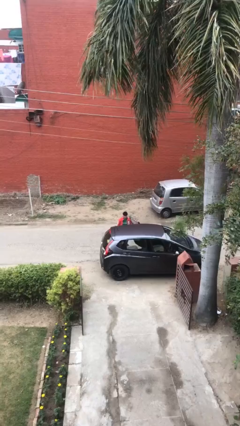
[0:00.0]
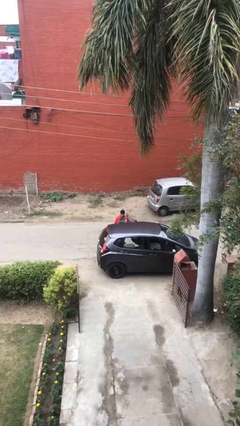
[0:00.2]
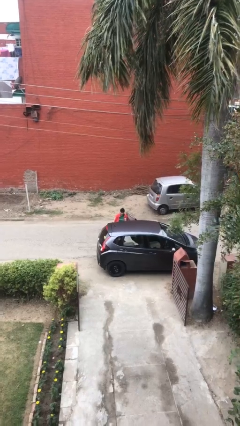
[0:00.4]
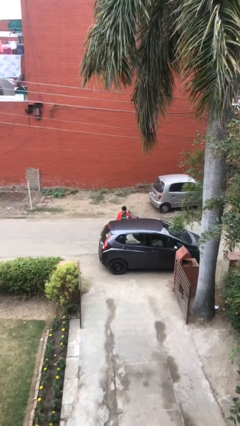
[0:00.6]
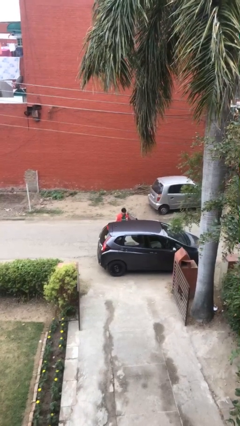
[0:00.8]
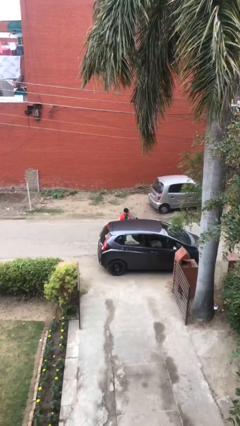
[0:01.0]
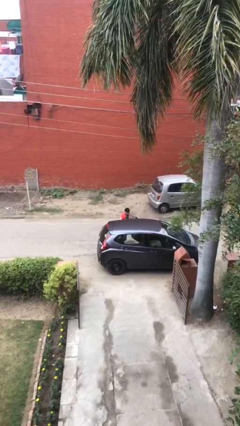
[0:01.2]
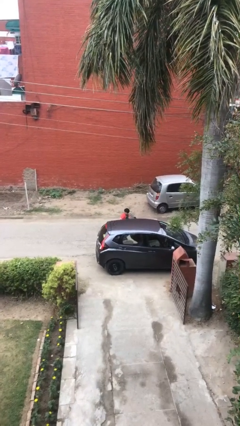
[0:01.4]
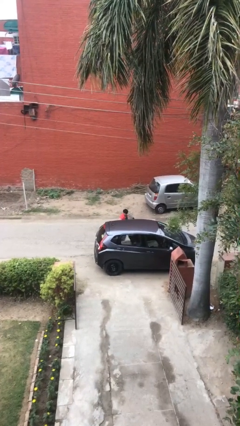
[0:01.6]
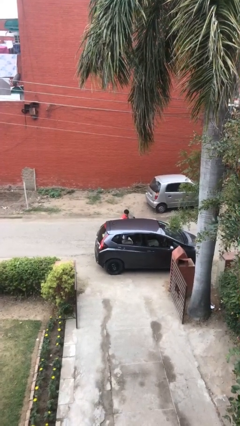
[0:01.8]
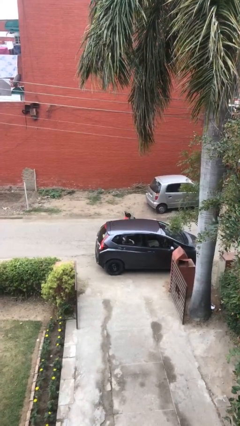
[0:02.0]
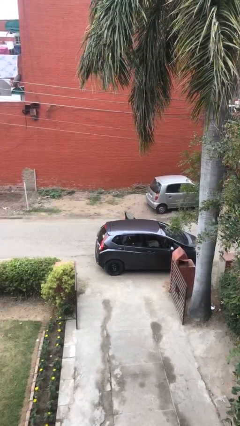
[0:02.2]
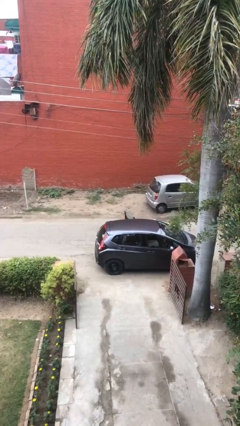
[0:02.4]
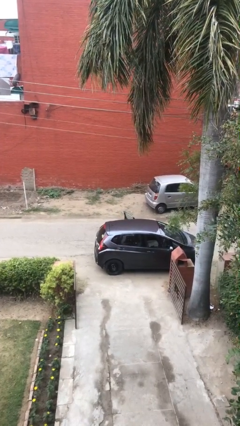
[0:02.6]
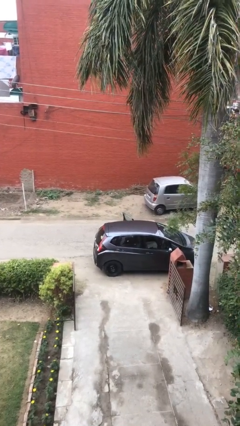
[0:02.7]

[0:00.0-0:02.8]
person enters car

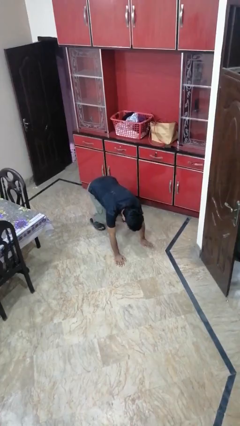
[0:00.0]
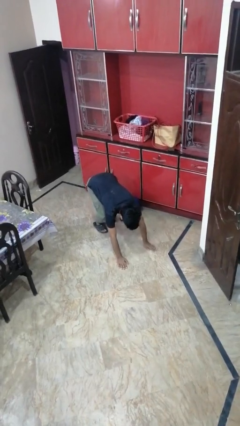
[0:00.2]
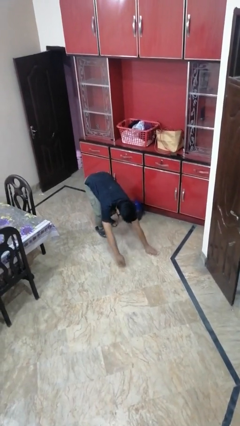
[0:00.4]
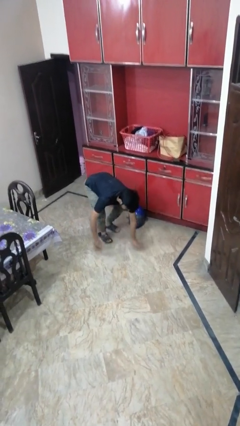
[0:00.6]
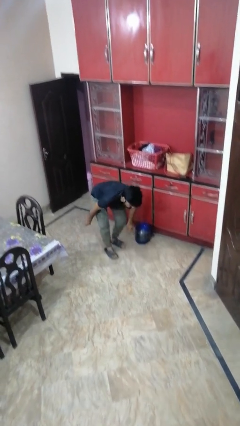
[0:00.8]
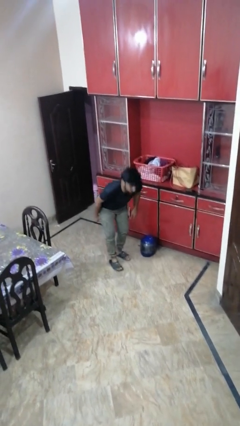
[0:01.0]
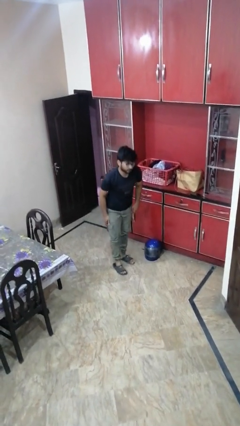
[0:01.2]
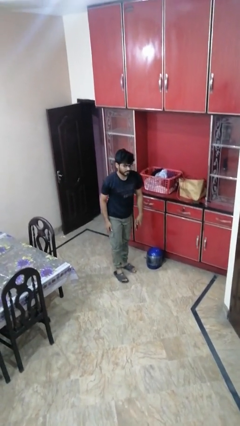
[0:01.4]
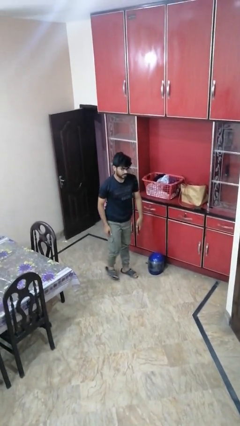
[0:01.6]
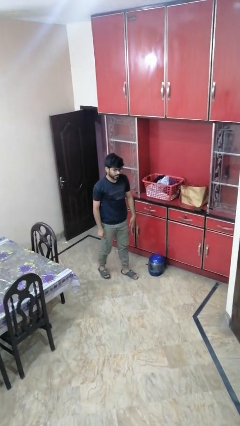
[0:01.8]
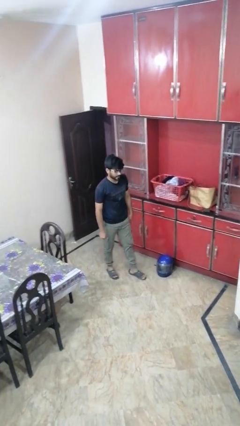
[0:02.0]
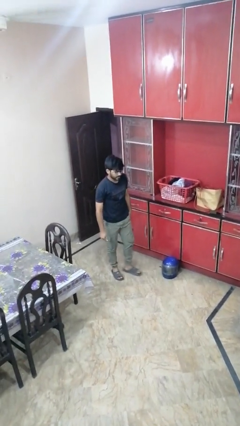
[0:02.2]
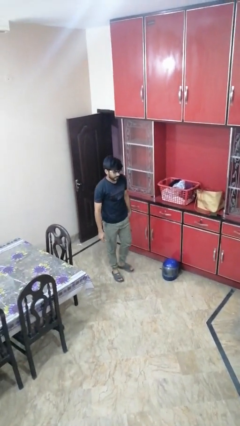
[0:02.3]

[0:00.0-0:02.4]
person stands up from floor

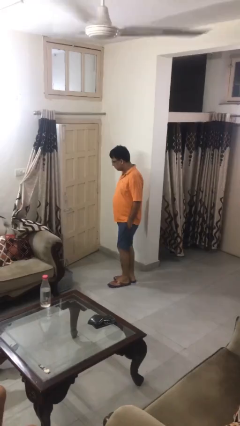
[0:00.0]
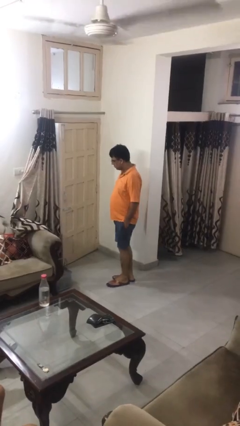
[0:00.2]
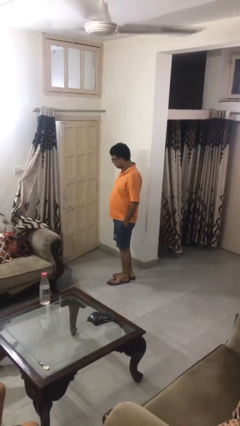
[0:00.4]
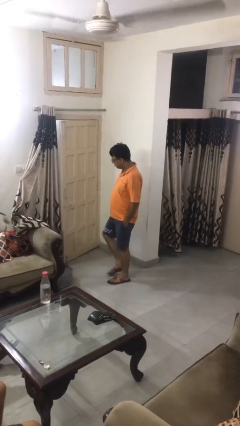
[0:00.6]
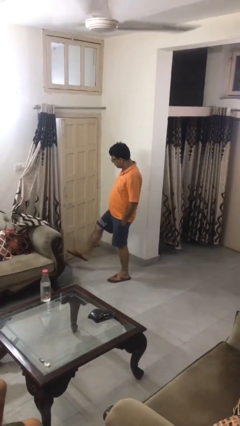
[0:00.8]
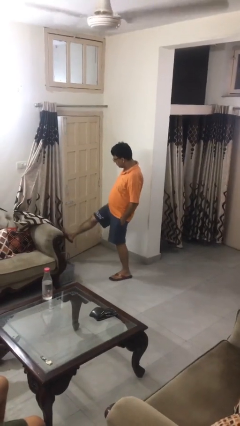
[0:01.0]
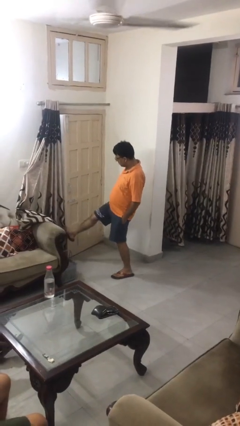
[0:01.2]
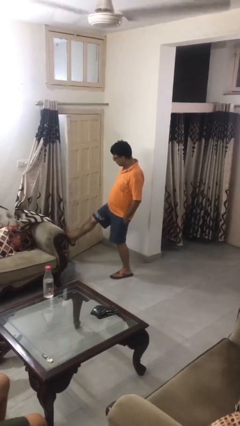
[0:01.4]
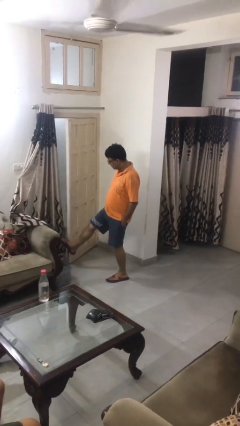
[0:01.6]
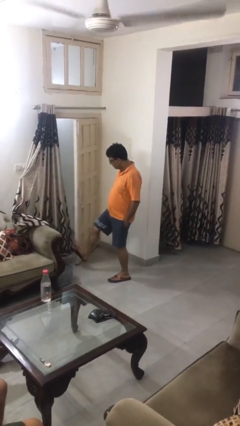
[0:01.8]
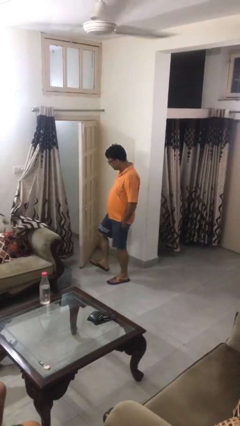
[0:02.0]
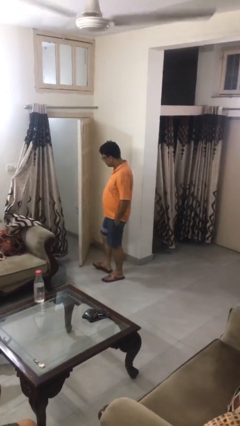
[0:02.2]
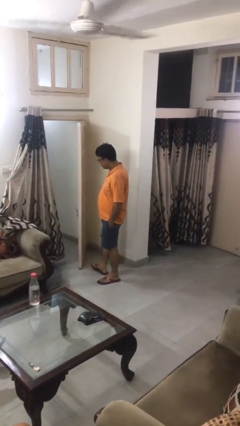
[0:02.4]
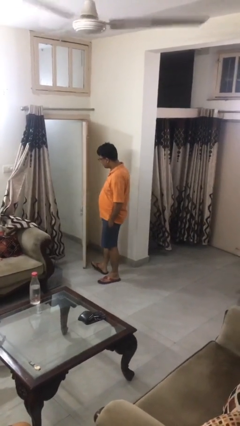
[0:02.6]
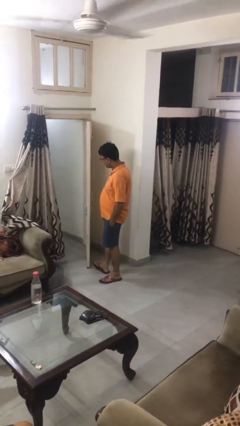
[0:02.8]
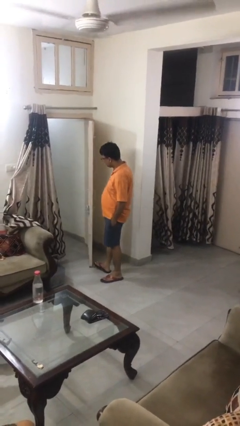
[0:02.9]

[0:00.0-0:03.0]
person opens facility door

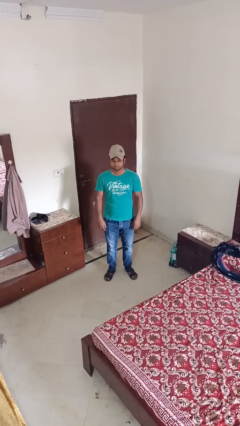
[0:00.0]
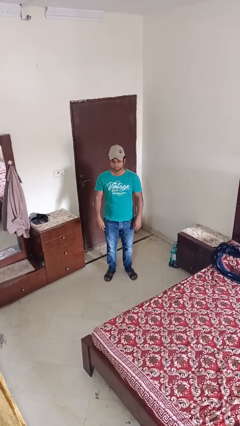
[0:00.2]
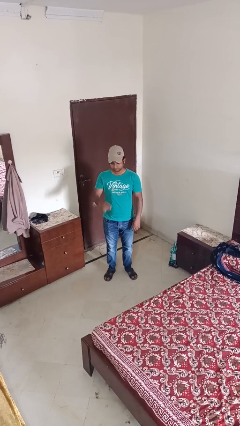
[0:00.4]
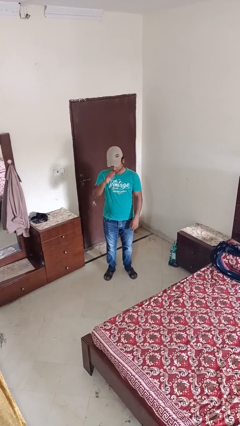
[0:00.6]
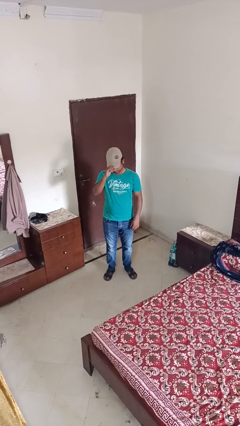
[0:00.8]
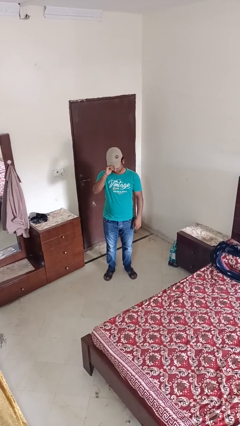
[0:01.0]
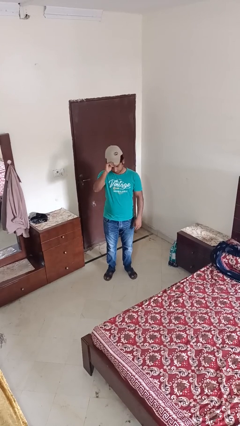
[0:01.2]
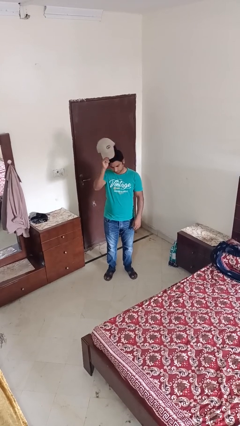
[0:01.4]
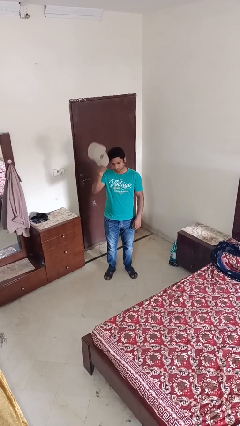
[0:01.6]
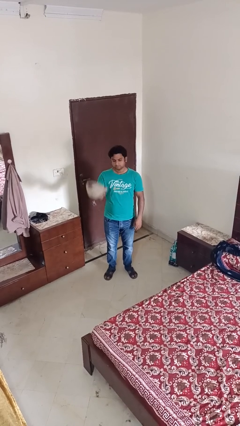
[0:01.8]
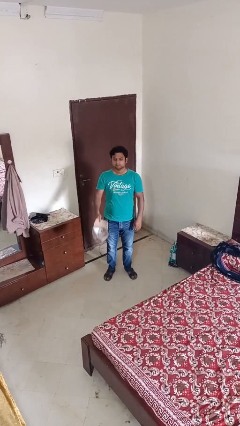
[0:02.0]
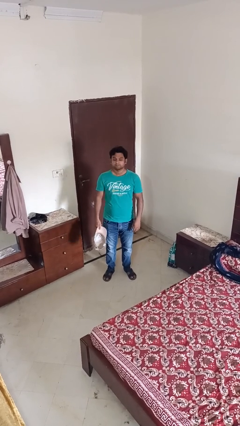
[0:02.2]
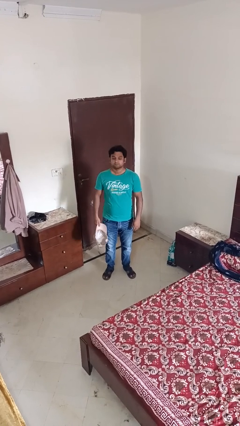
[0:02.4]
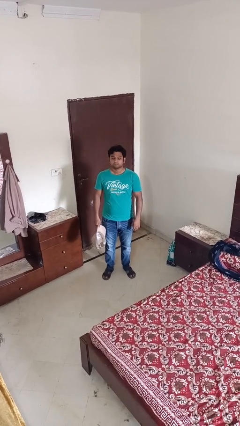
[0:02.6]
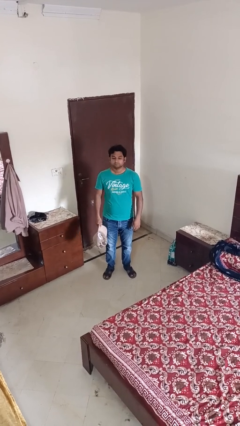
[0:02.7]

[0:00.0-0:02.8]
person takes off hat

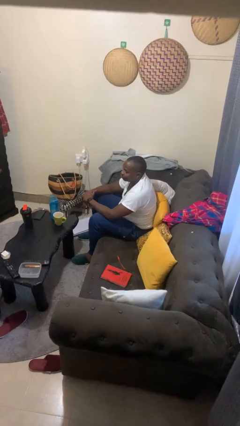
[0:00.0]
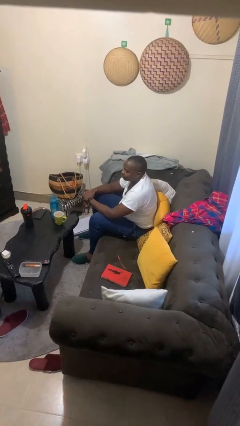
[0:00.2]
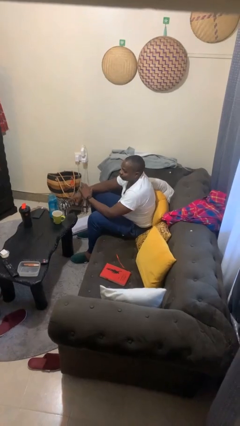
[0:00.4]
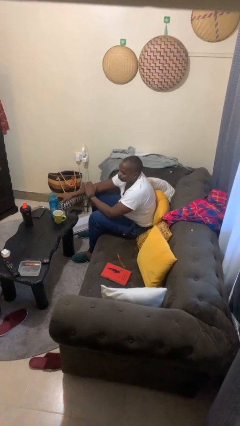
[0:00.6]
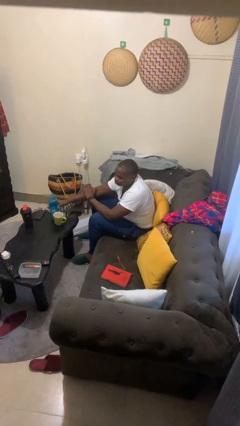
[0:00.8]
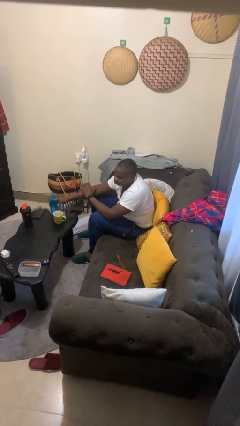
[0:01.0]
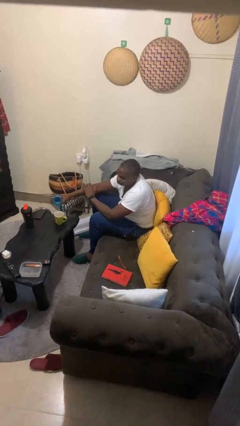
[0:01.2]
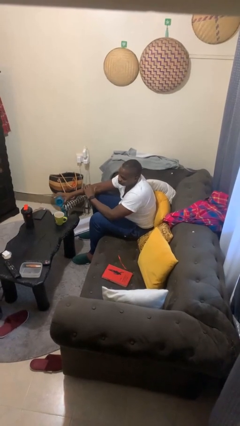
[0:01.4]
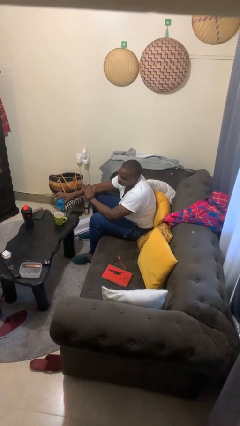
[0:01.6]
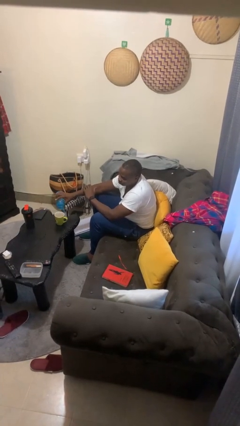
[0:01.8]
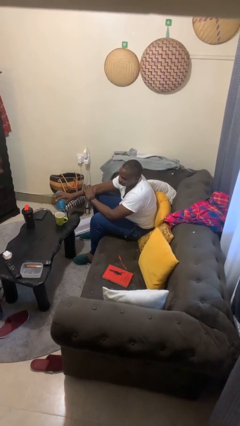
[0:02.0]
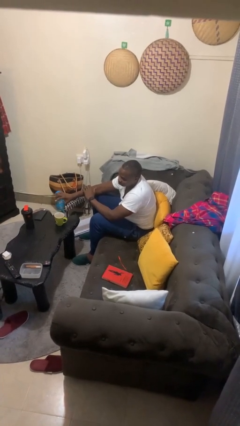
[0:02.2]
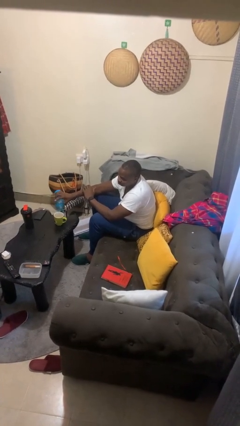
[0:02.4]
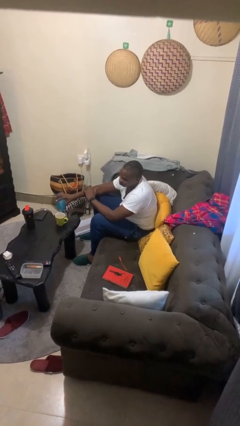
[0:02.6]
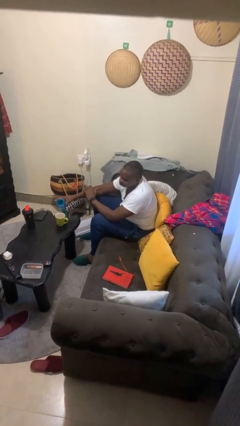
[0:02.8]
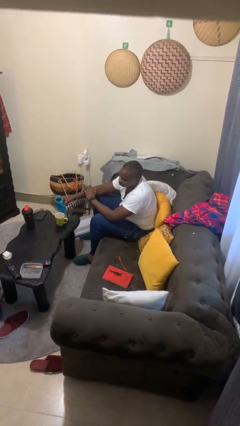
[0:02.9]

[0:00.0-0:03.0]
person pours liquid into cup

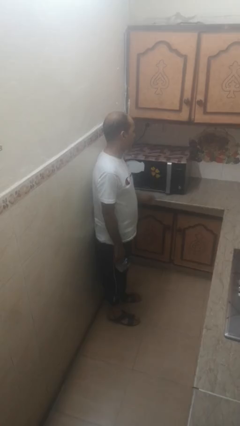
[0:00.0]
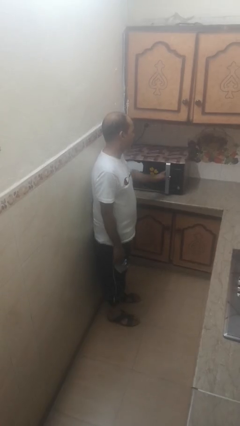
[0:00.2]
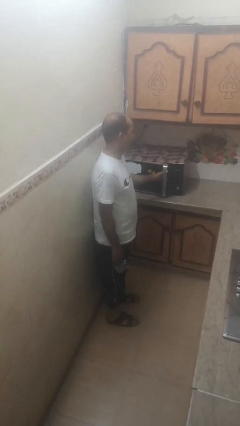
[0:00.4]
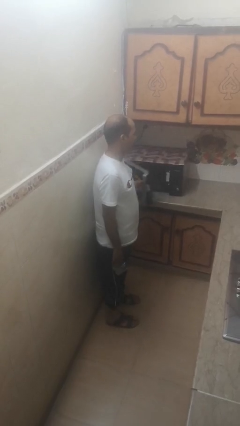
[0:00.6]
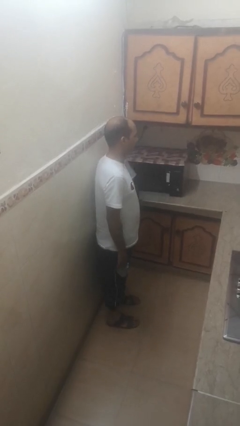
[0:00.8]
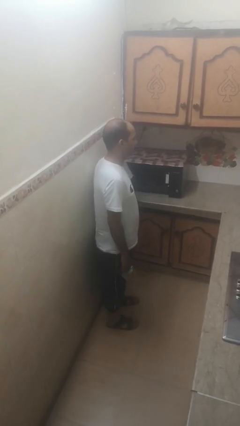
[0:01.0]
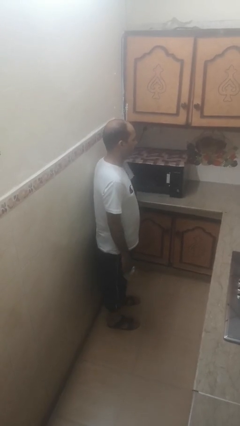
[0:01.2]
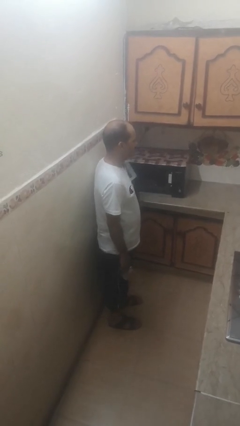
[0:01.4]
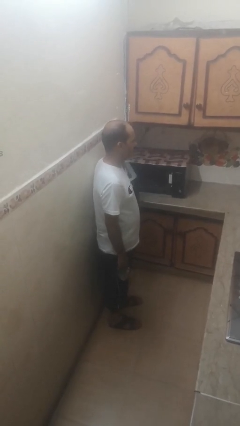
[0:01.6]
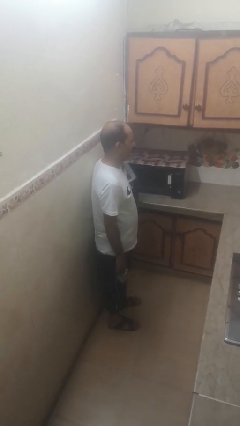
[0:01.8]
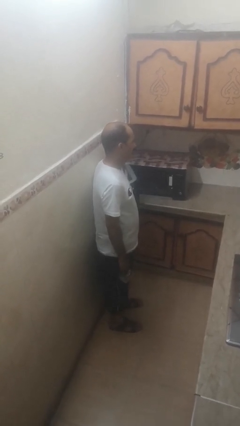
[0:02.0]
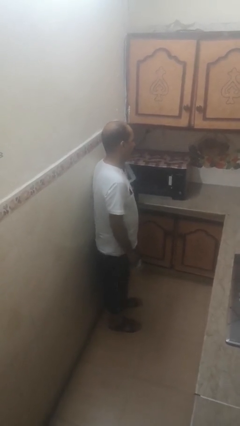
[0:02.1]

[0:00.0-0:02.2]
person opens microwave

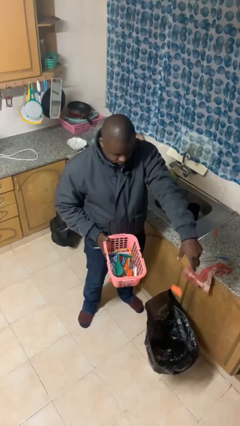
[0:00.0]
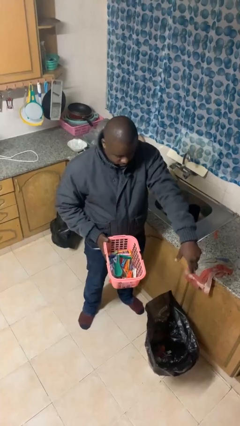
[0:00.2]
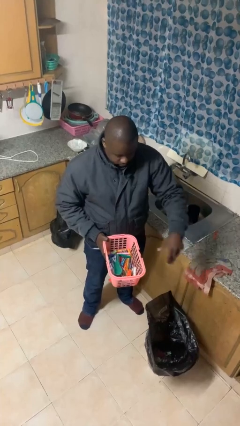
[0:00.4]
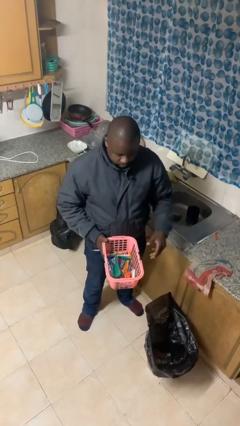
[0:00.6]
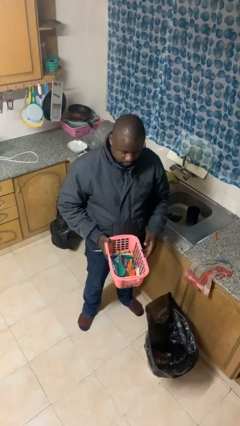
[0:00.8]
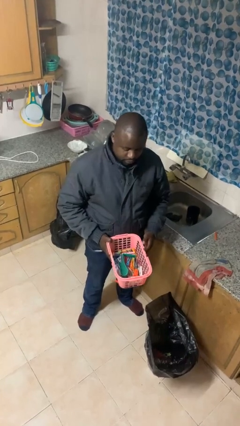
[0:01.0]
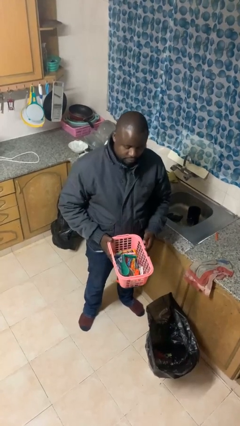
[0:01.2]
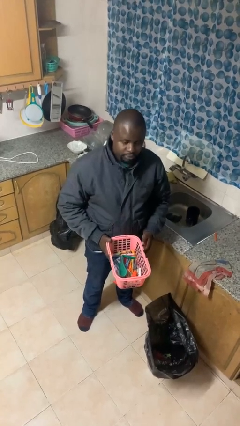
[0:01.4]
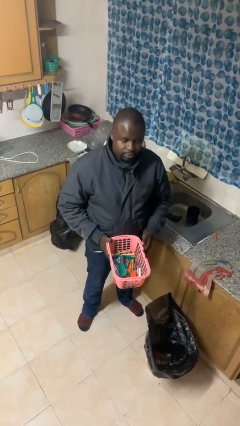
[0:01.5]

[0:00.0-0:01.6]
person discards trash
